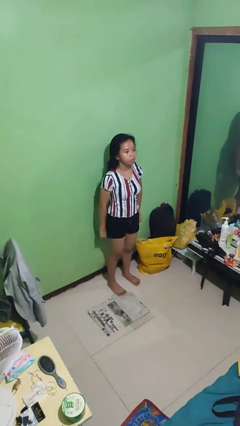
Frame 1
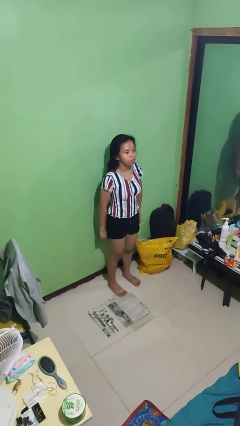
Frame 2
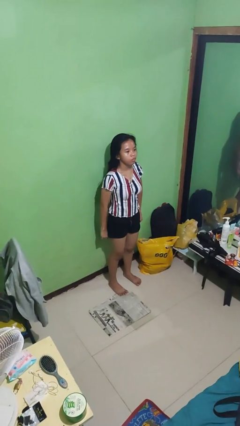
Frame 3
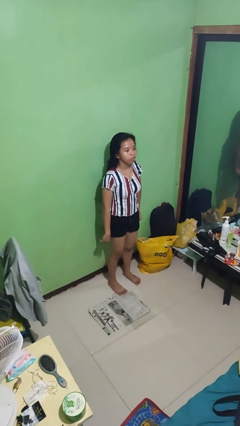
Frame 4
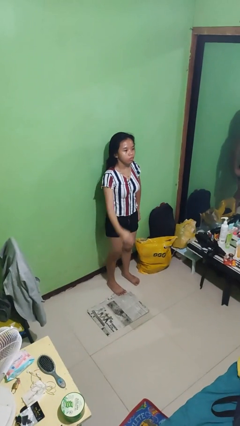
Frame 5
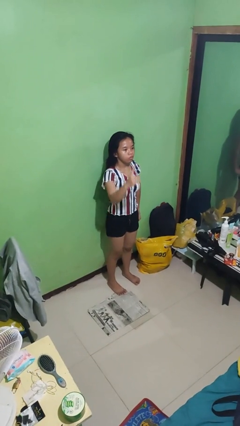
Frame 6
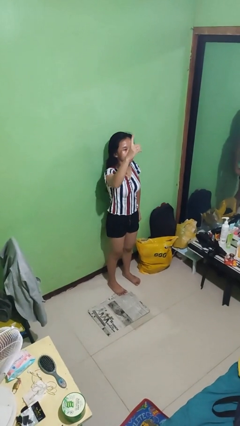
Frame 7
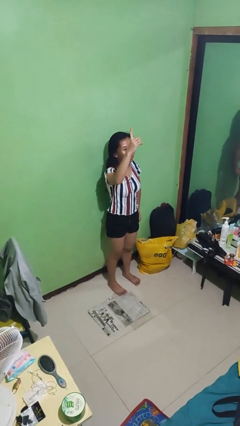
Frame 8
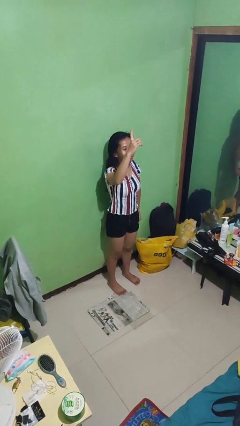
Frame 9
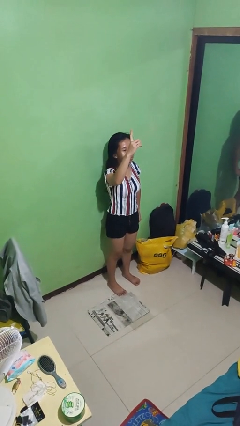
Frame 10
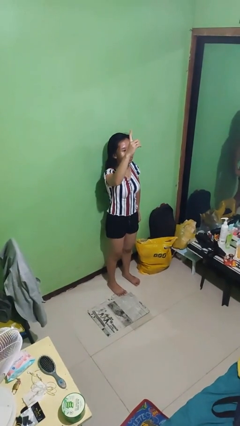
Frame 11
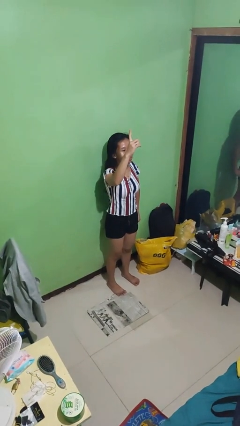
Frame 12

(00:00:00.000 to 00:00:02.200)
person gestures number one

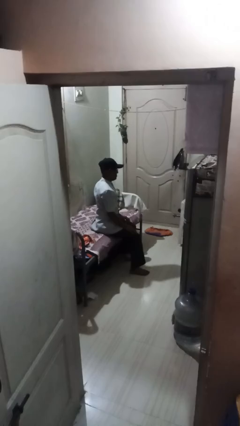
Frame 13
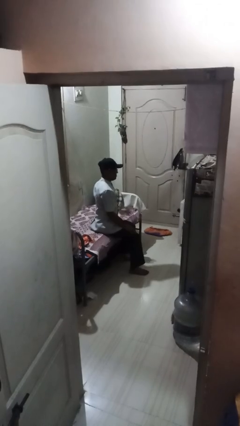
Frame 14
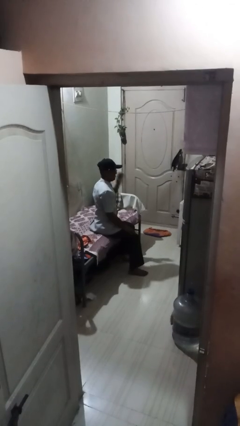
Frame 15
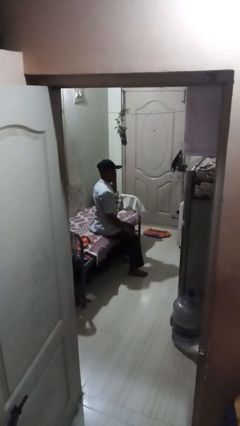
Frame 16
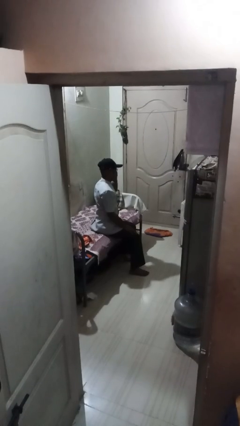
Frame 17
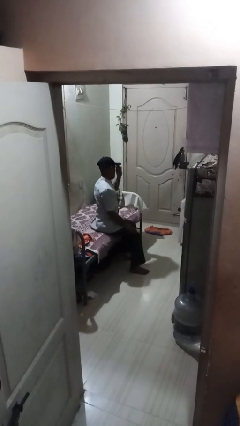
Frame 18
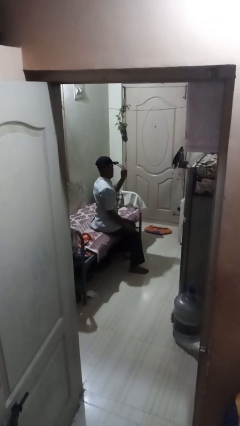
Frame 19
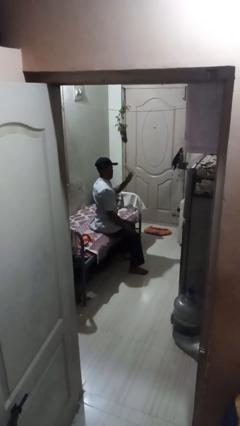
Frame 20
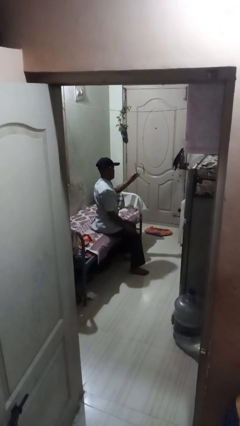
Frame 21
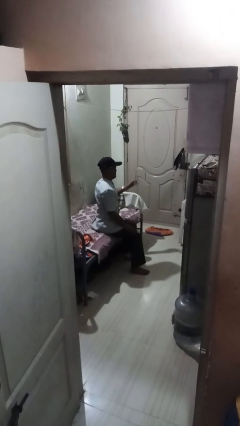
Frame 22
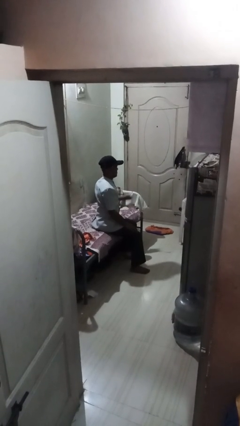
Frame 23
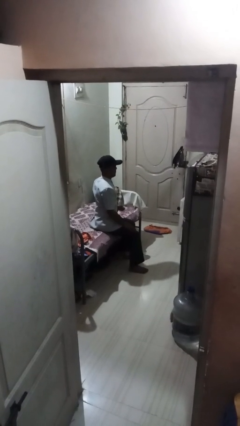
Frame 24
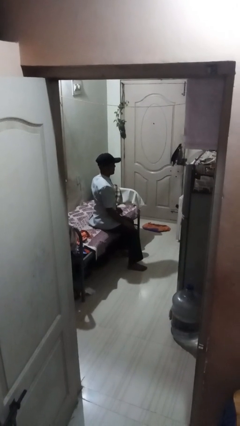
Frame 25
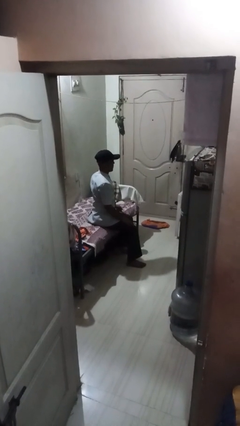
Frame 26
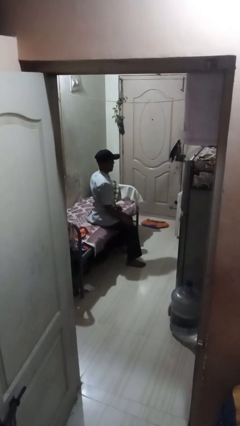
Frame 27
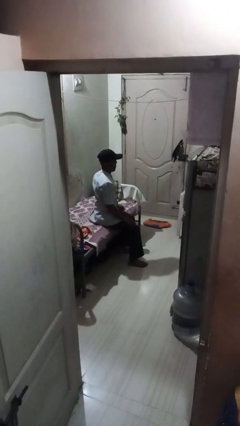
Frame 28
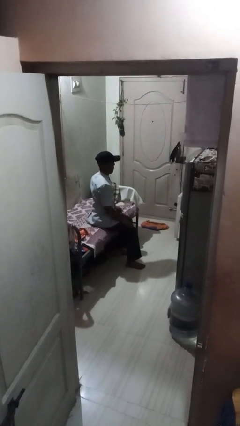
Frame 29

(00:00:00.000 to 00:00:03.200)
person takes off glasses

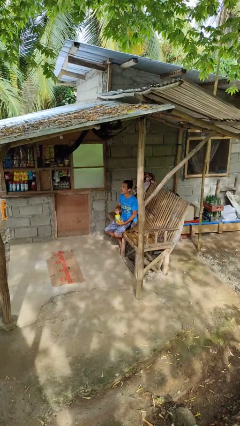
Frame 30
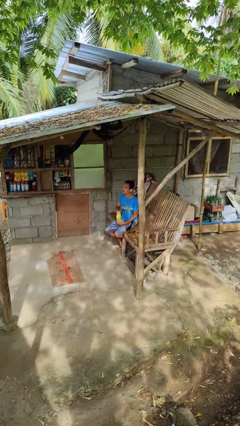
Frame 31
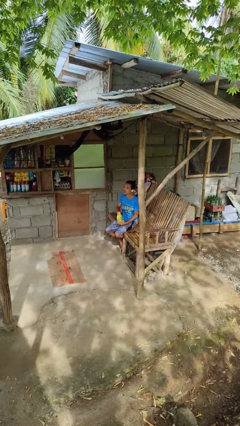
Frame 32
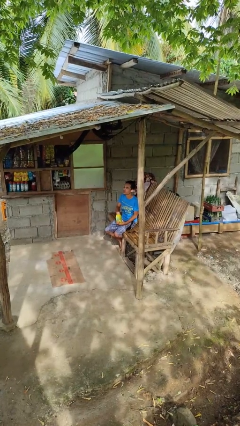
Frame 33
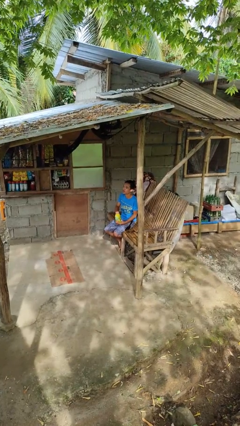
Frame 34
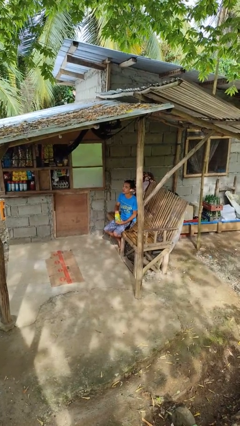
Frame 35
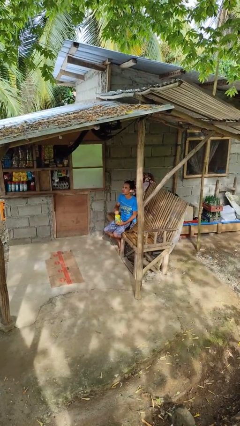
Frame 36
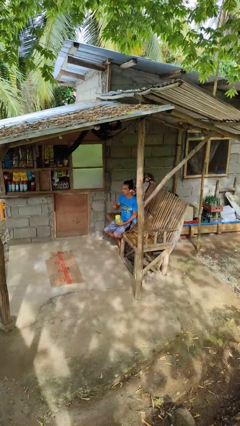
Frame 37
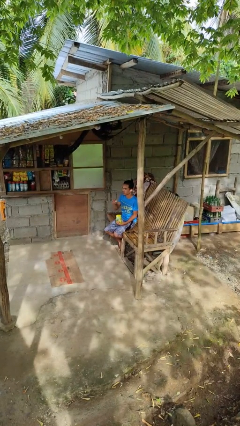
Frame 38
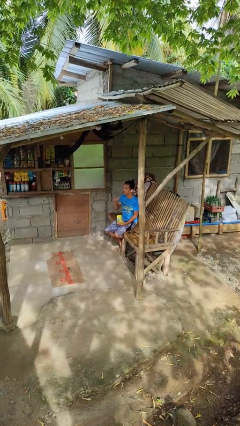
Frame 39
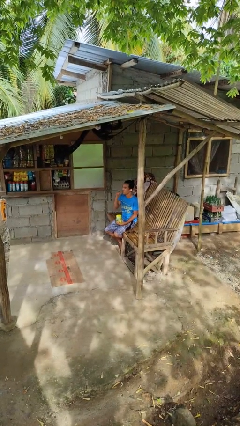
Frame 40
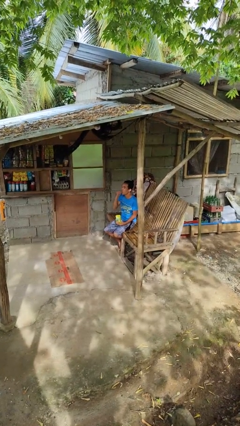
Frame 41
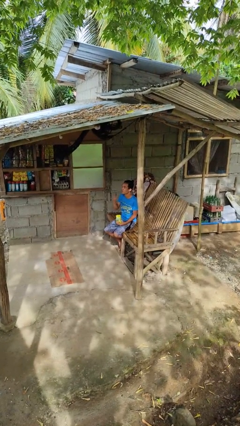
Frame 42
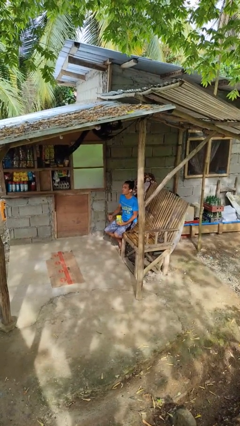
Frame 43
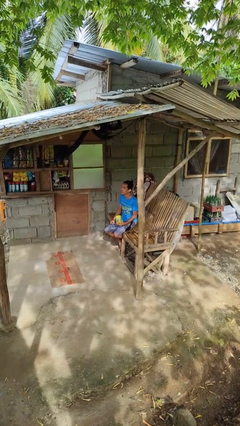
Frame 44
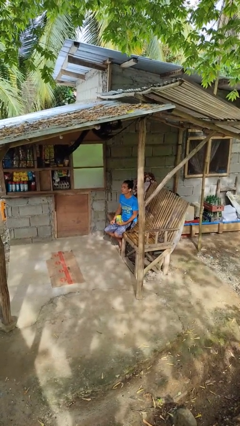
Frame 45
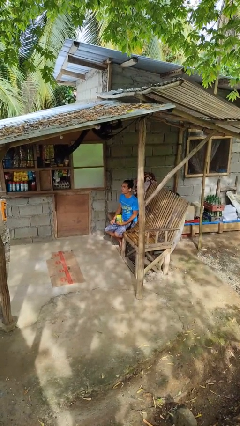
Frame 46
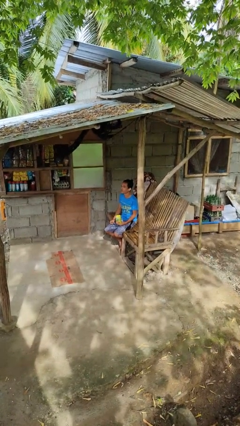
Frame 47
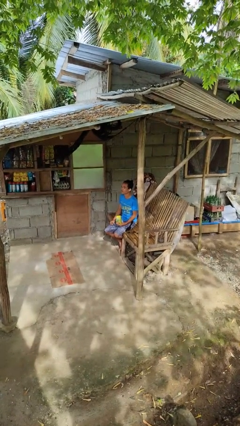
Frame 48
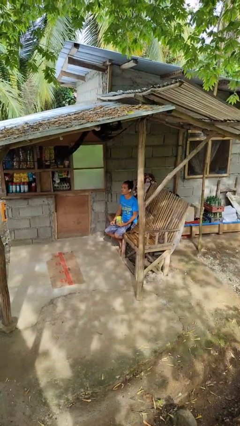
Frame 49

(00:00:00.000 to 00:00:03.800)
person eats snack from bag

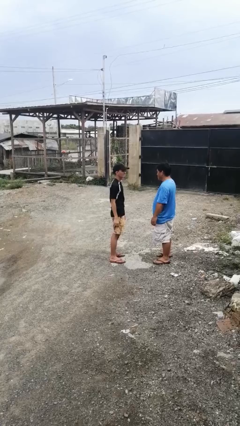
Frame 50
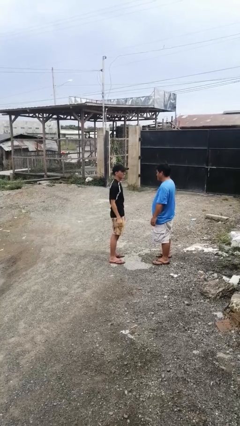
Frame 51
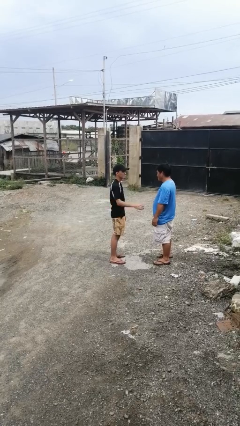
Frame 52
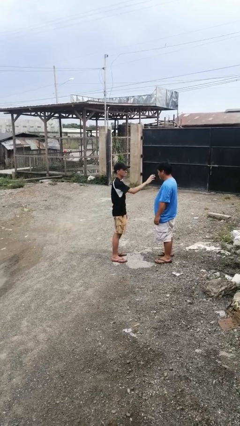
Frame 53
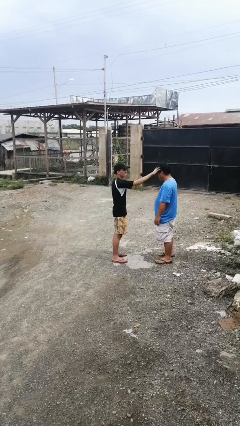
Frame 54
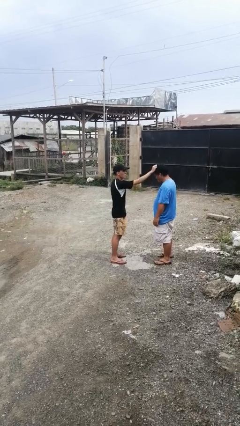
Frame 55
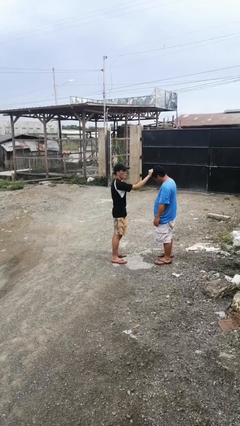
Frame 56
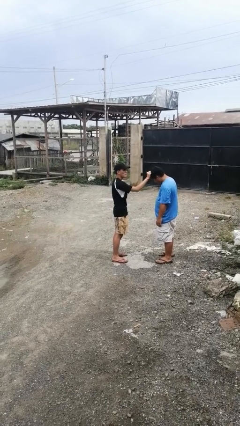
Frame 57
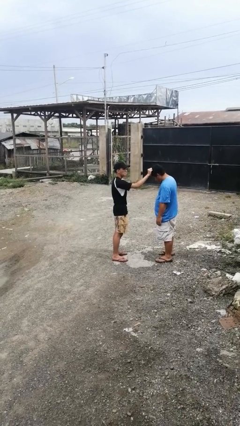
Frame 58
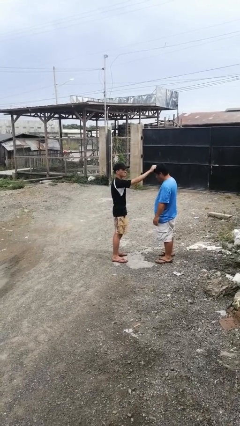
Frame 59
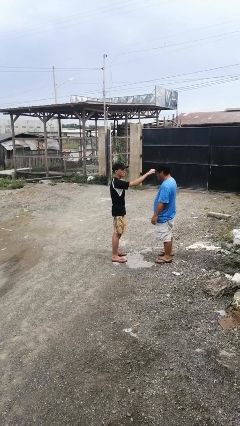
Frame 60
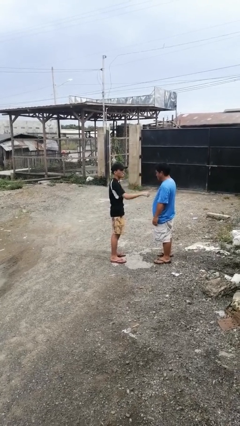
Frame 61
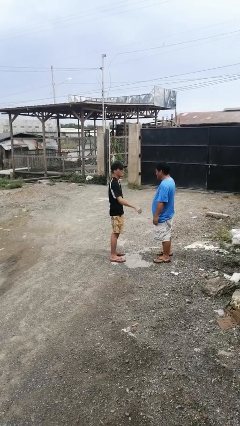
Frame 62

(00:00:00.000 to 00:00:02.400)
person grabs person by hair

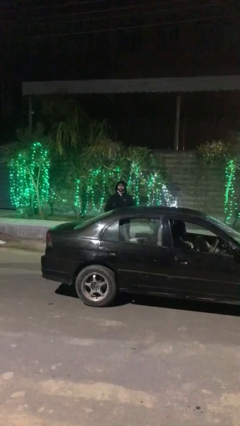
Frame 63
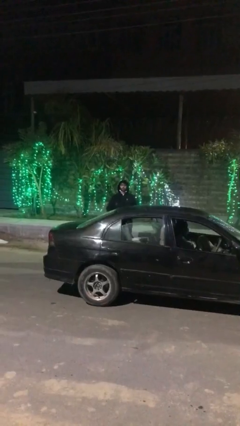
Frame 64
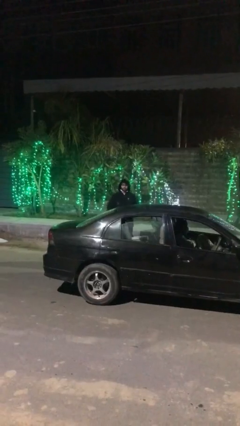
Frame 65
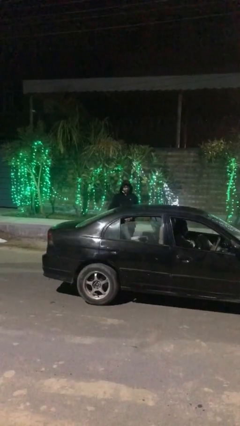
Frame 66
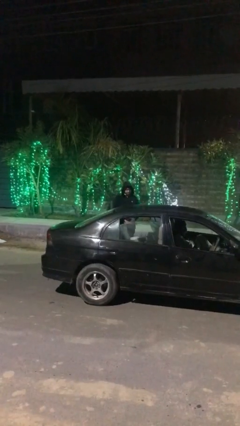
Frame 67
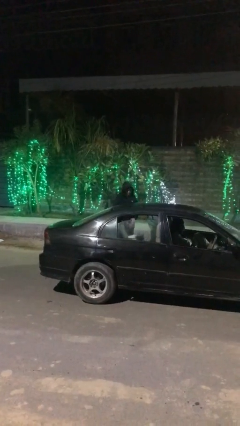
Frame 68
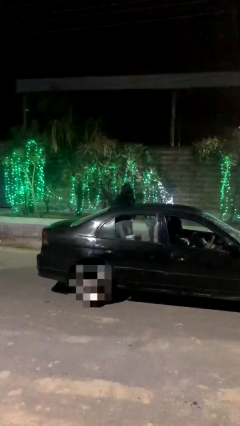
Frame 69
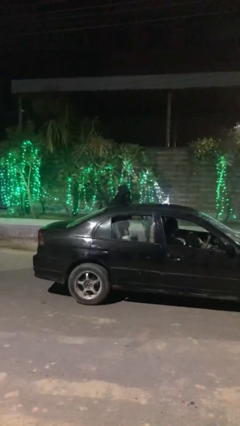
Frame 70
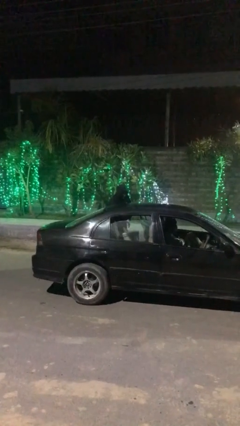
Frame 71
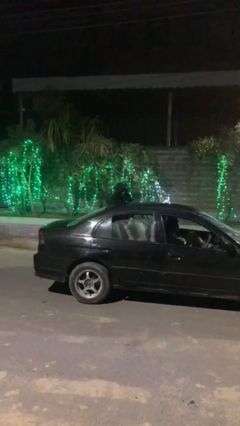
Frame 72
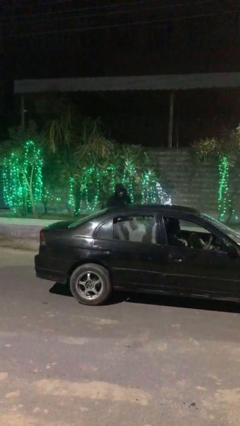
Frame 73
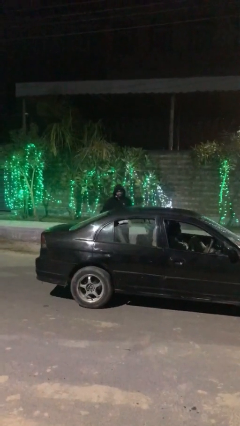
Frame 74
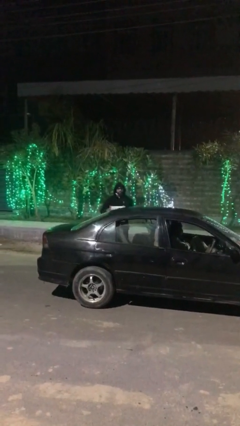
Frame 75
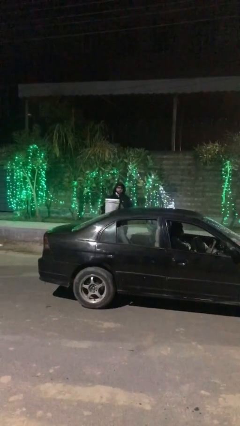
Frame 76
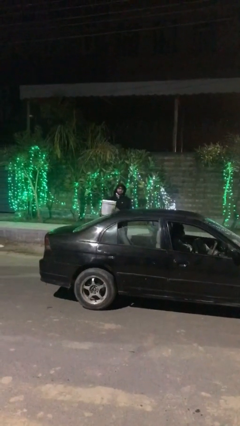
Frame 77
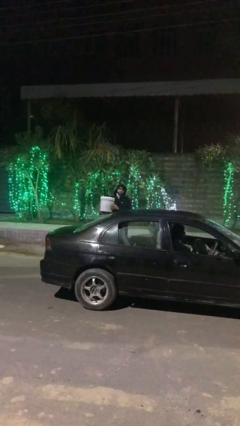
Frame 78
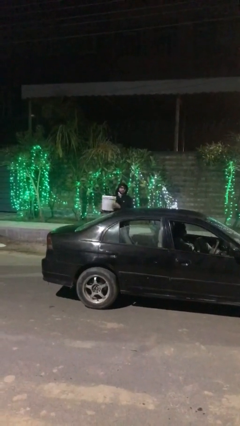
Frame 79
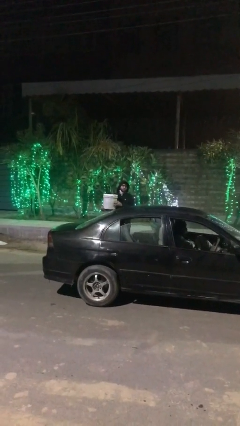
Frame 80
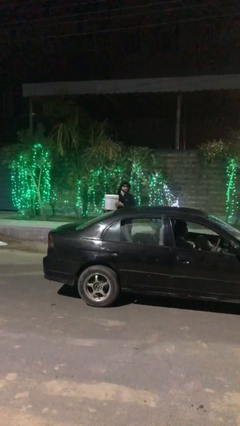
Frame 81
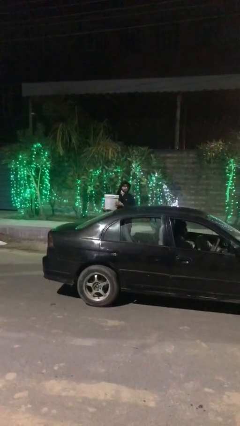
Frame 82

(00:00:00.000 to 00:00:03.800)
person unloads car

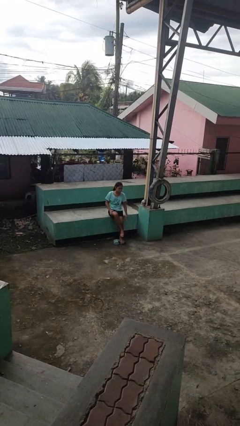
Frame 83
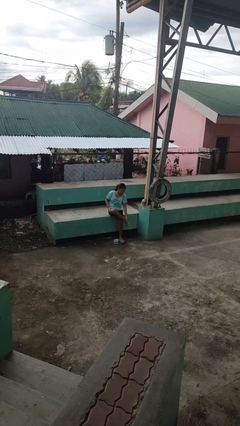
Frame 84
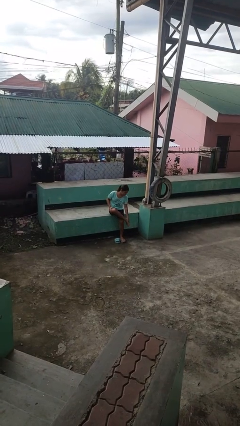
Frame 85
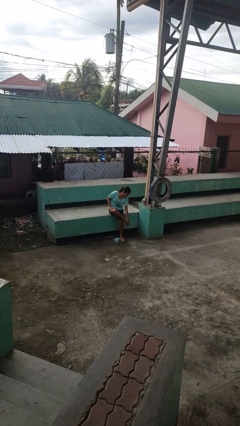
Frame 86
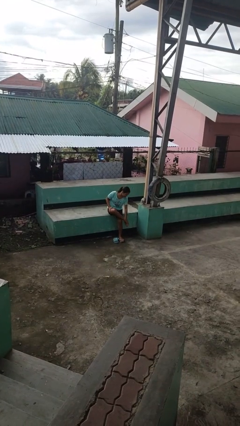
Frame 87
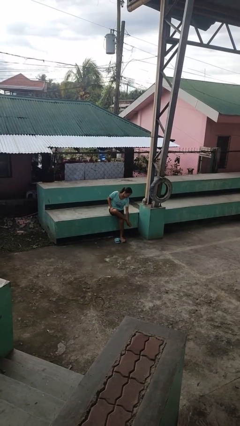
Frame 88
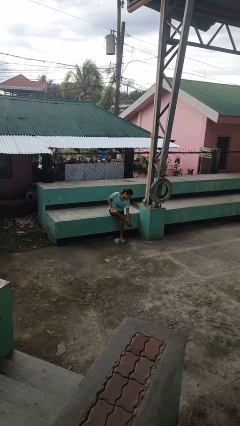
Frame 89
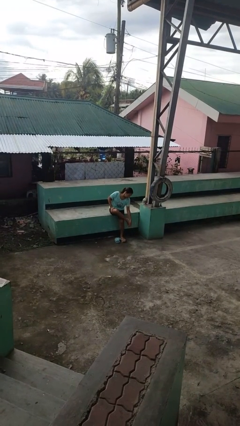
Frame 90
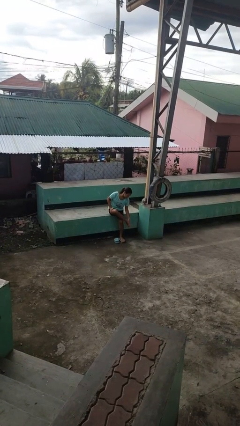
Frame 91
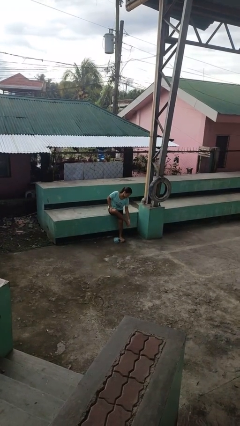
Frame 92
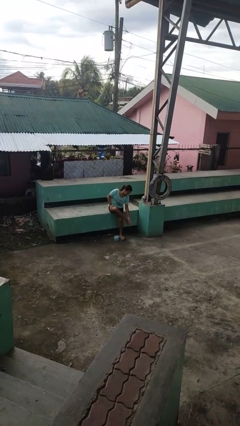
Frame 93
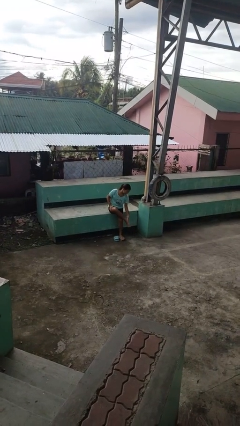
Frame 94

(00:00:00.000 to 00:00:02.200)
person rubs foot
